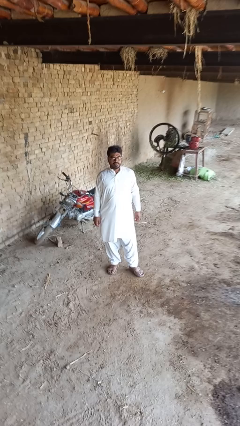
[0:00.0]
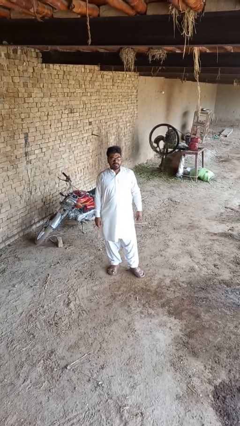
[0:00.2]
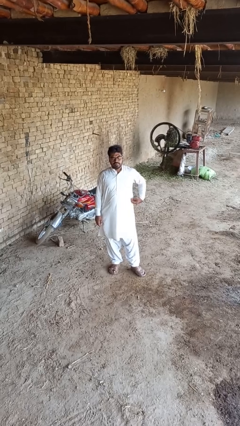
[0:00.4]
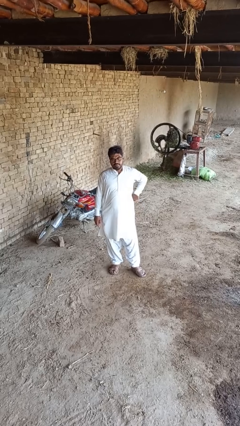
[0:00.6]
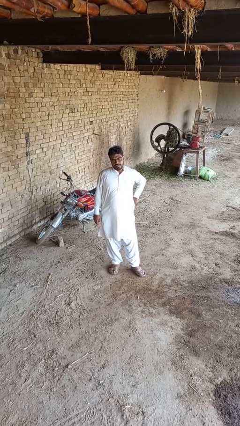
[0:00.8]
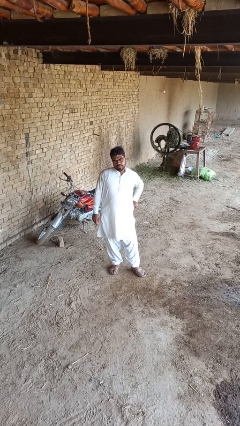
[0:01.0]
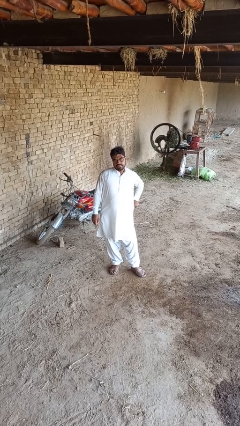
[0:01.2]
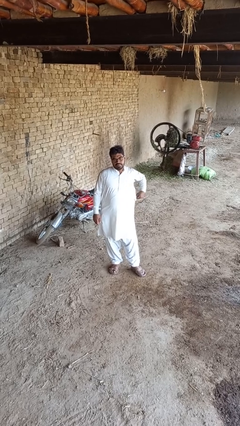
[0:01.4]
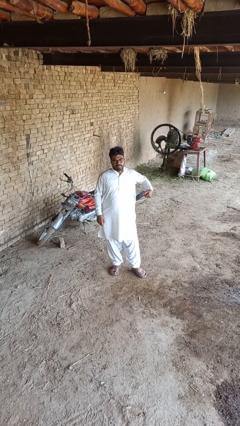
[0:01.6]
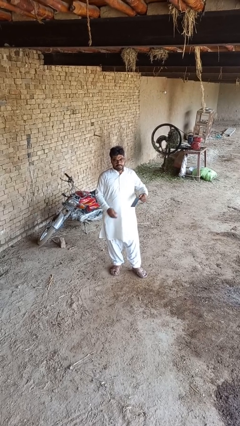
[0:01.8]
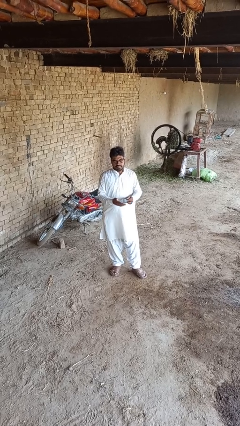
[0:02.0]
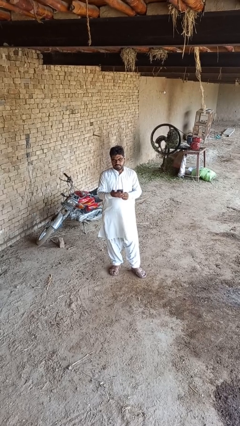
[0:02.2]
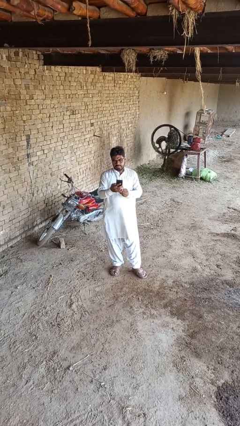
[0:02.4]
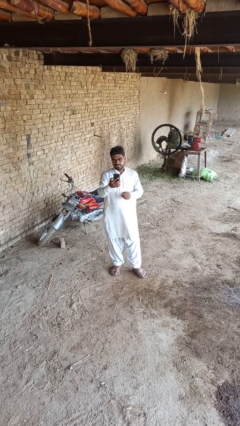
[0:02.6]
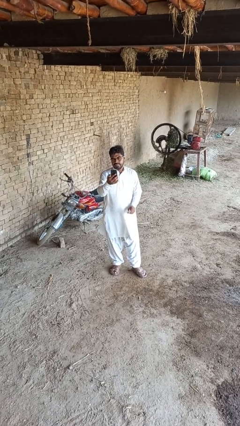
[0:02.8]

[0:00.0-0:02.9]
person takes phone from pocket

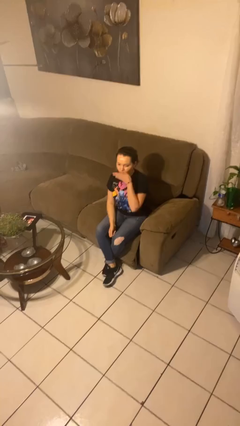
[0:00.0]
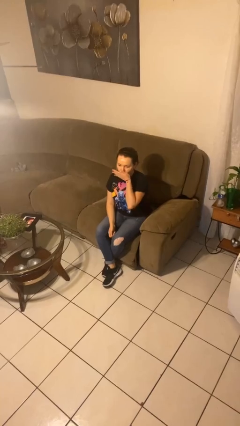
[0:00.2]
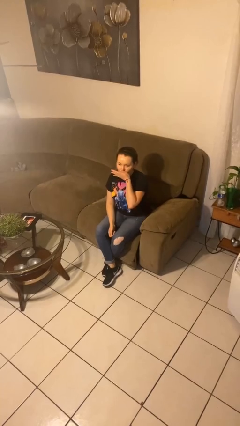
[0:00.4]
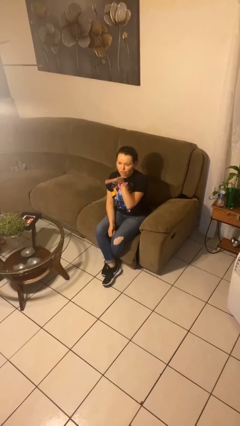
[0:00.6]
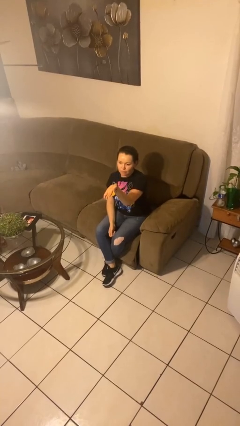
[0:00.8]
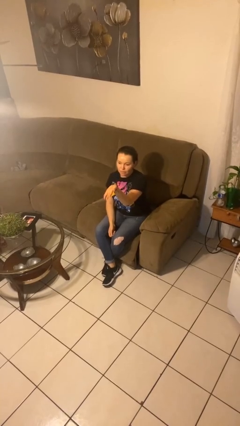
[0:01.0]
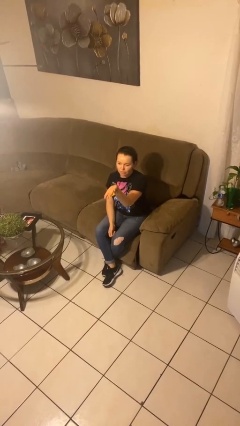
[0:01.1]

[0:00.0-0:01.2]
person gestures blow kiss

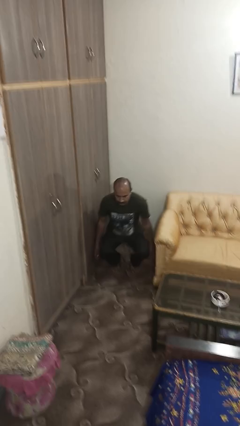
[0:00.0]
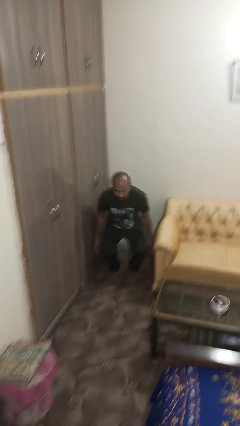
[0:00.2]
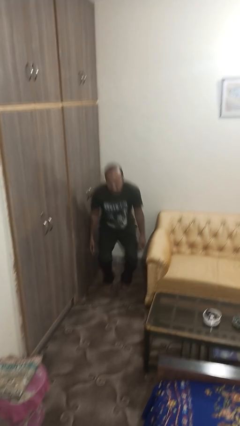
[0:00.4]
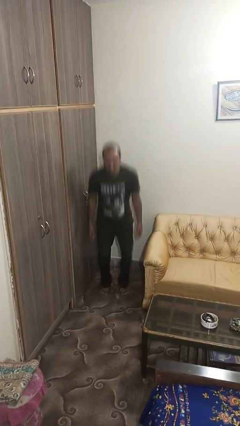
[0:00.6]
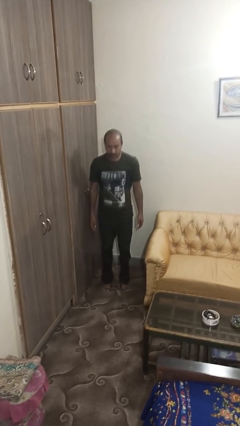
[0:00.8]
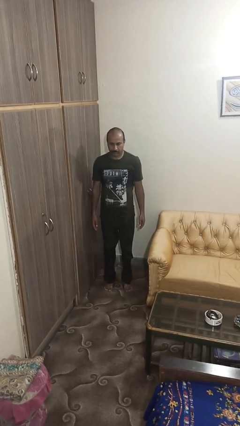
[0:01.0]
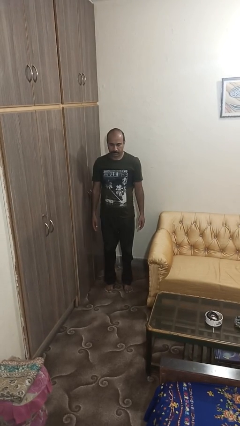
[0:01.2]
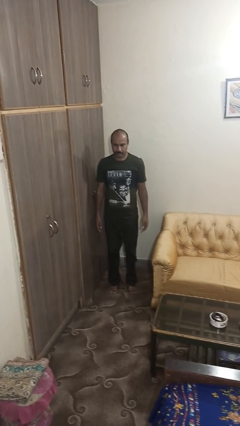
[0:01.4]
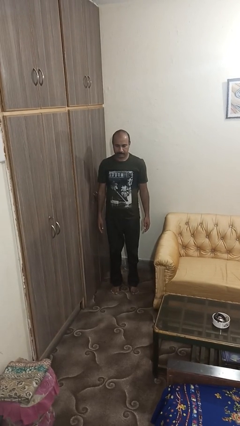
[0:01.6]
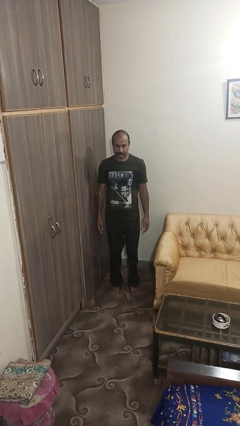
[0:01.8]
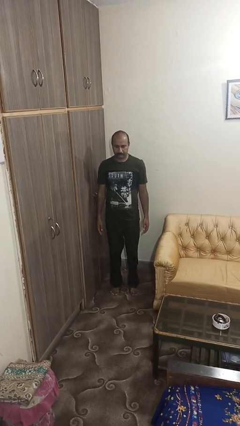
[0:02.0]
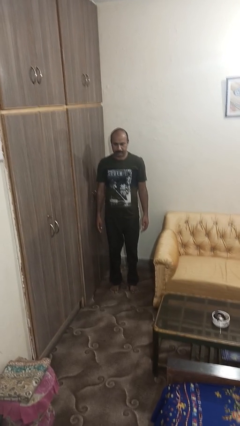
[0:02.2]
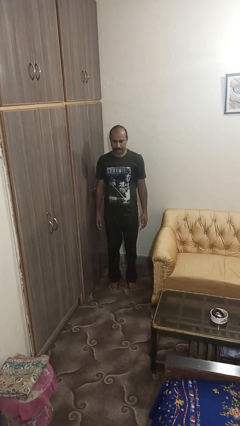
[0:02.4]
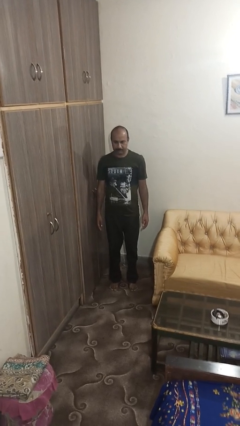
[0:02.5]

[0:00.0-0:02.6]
person stands up

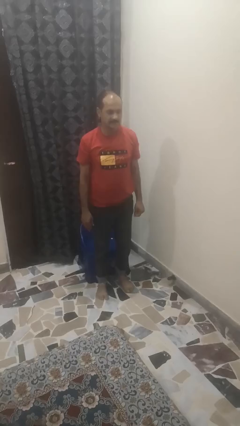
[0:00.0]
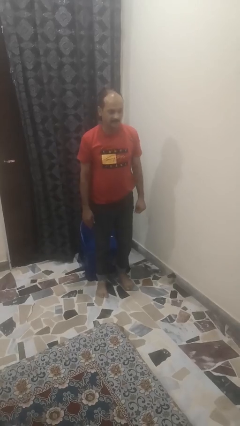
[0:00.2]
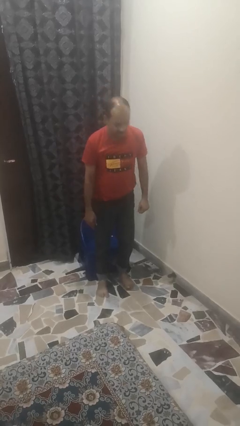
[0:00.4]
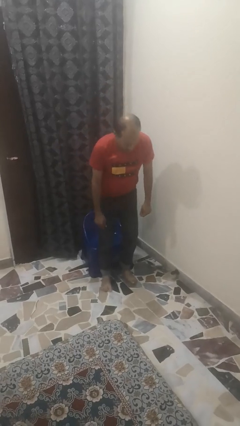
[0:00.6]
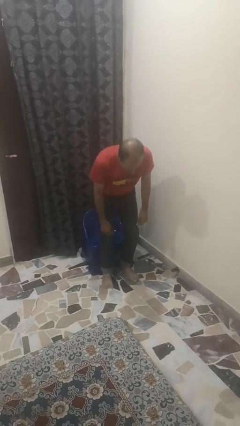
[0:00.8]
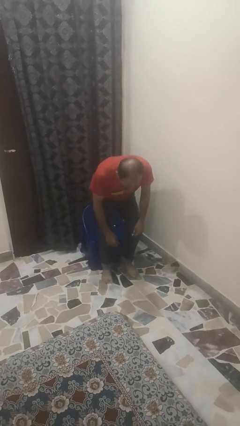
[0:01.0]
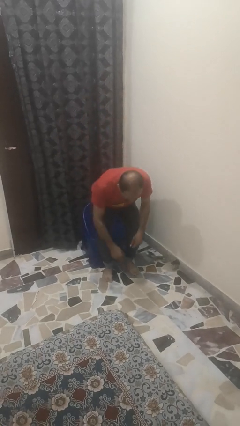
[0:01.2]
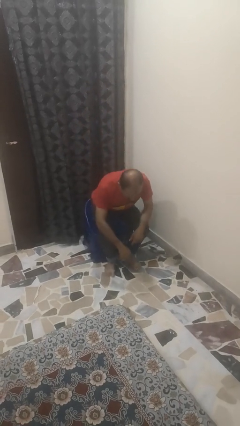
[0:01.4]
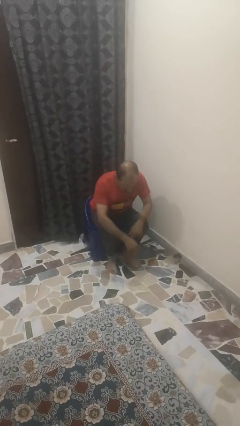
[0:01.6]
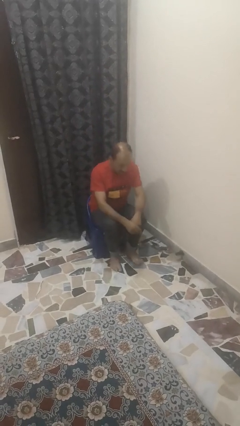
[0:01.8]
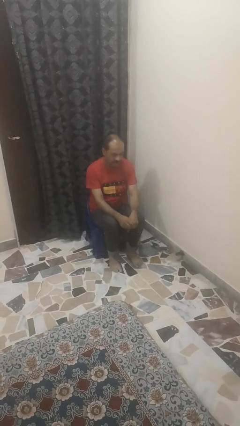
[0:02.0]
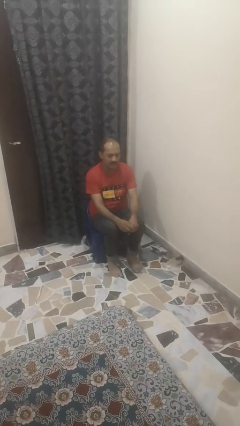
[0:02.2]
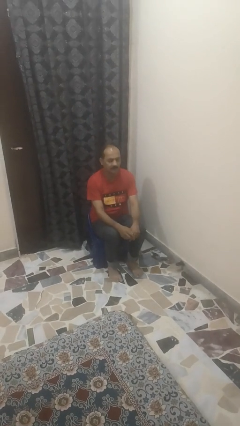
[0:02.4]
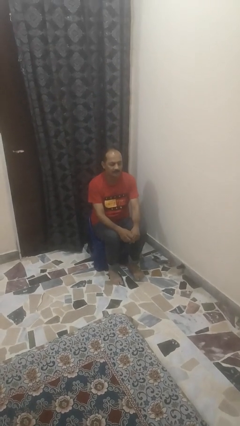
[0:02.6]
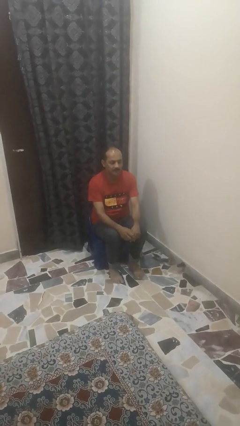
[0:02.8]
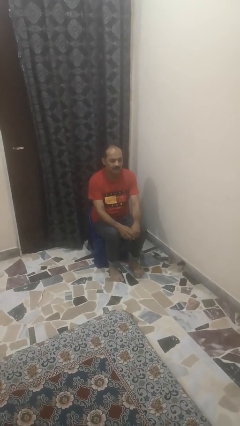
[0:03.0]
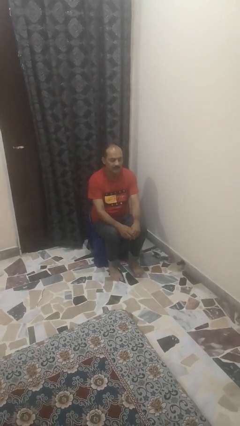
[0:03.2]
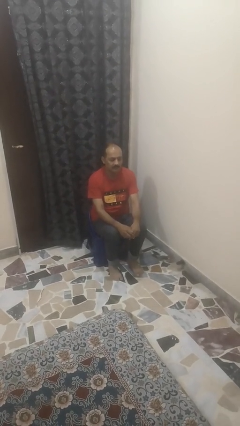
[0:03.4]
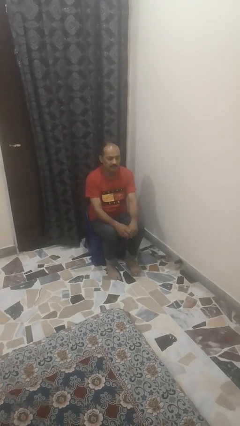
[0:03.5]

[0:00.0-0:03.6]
person sits down

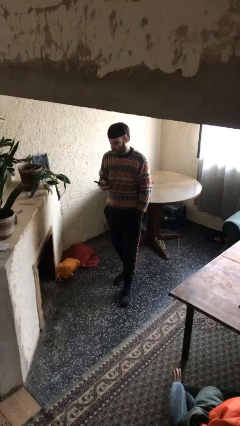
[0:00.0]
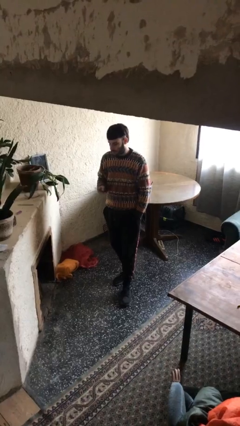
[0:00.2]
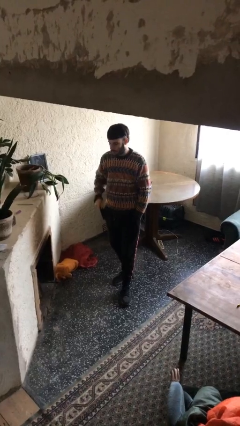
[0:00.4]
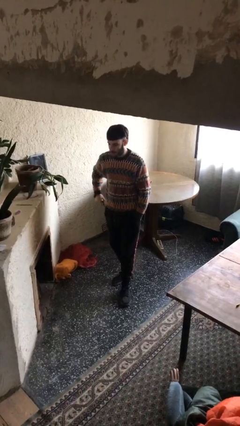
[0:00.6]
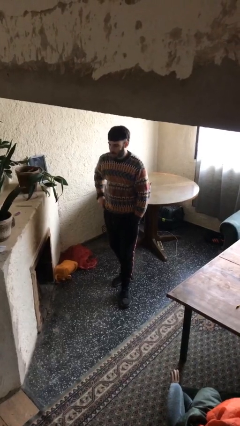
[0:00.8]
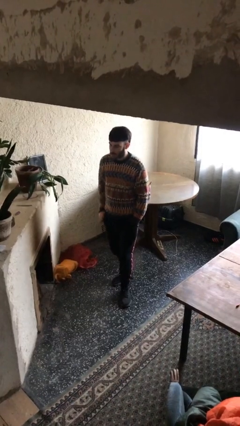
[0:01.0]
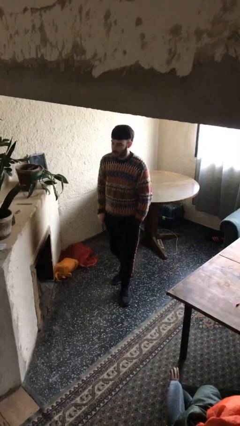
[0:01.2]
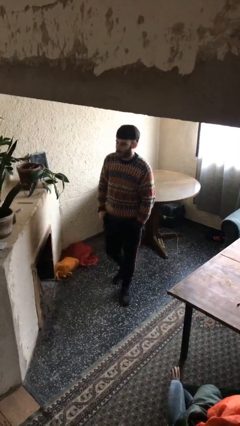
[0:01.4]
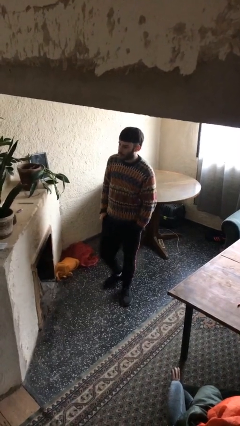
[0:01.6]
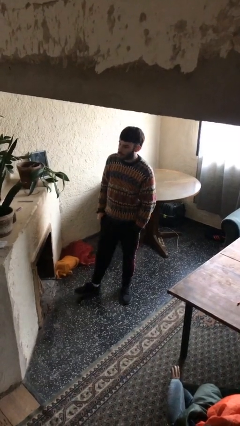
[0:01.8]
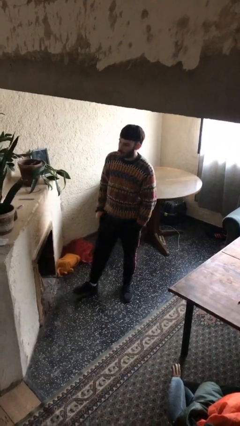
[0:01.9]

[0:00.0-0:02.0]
person puts phone into pocket

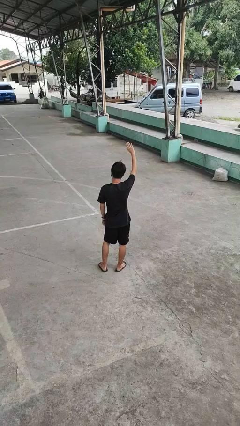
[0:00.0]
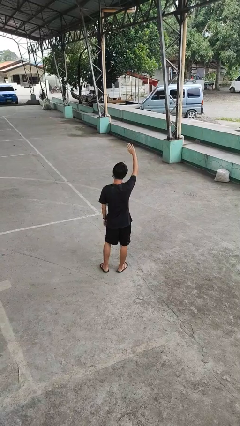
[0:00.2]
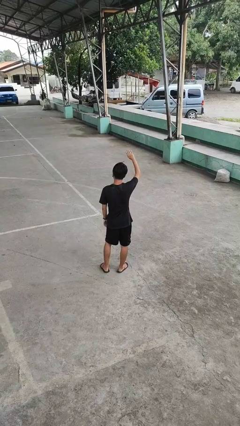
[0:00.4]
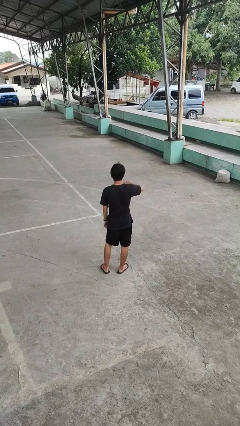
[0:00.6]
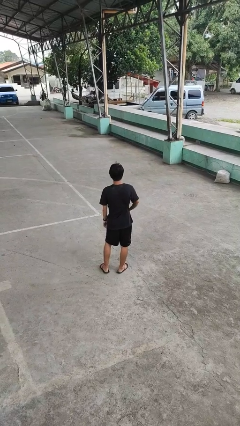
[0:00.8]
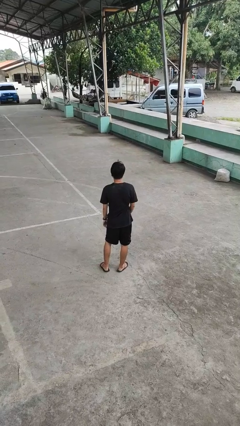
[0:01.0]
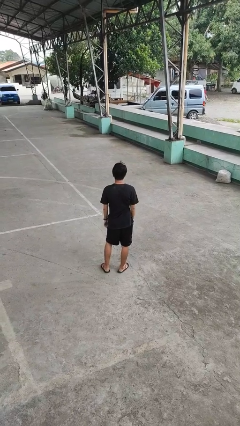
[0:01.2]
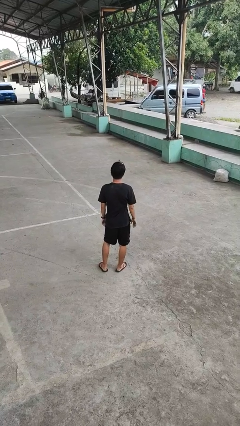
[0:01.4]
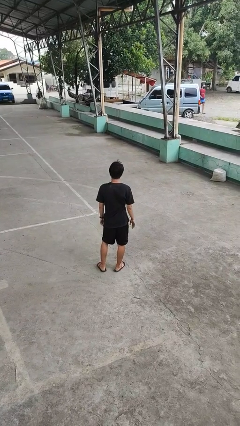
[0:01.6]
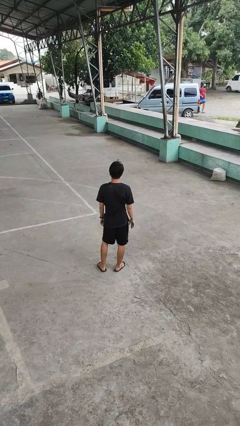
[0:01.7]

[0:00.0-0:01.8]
person gestures swipe down

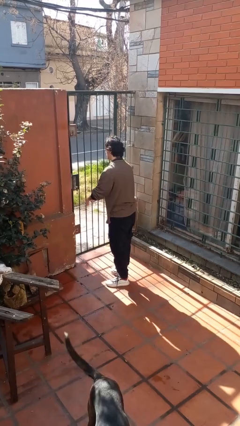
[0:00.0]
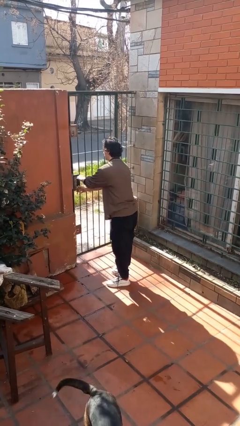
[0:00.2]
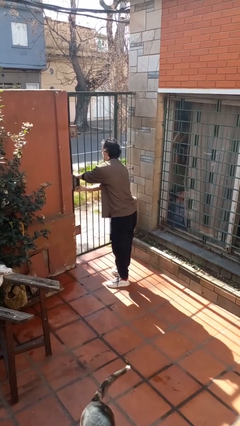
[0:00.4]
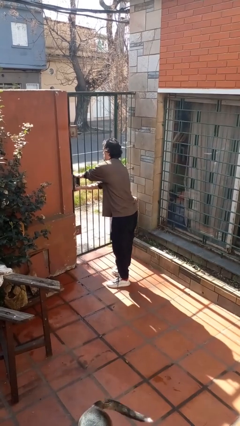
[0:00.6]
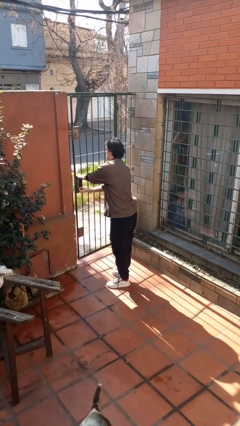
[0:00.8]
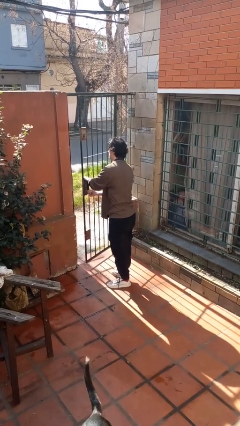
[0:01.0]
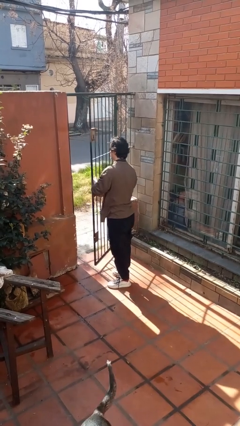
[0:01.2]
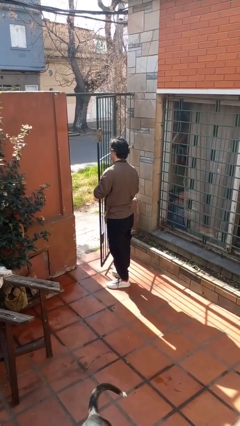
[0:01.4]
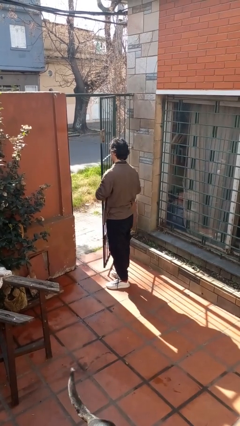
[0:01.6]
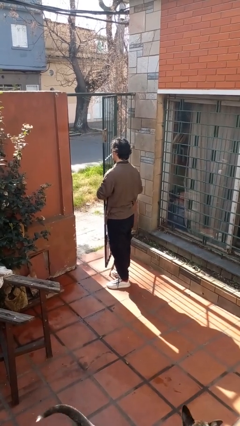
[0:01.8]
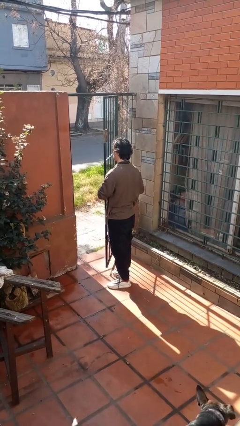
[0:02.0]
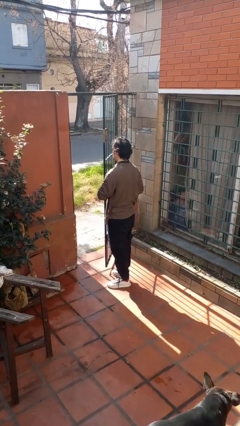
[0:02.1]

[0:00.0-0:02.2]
person opens gate

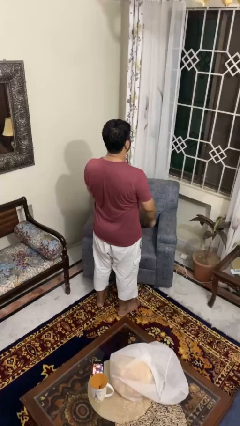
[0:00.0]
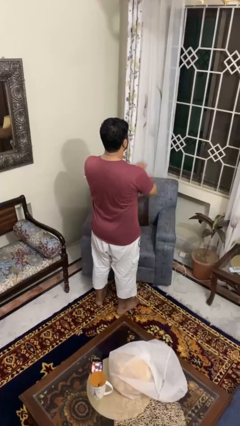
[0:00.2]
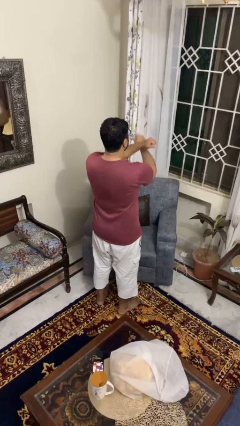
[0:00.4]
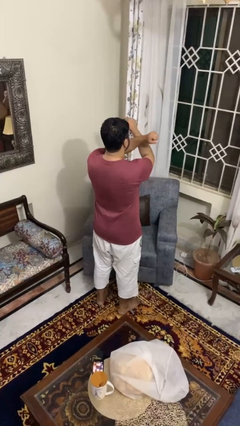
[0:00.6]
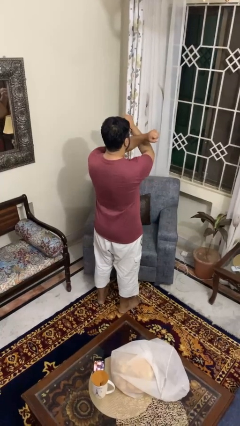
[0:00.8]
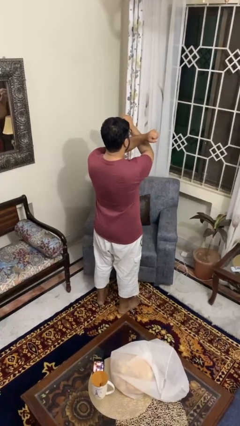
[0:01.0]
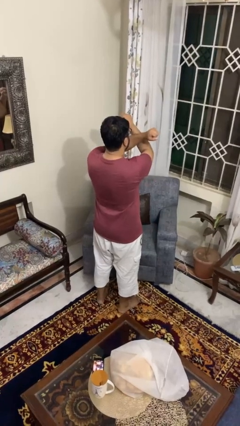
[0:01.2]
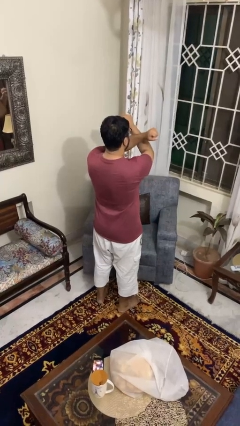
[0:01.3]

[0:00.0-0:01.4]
person gestures arms x
